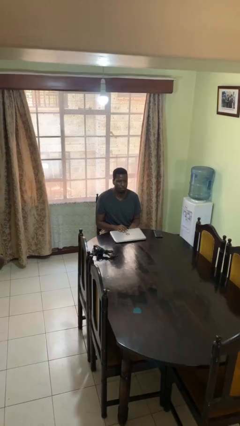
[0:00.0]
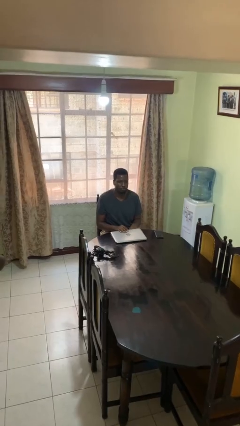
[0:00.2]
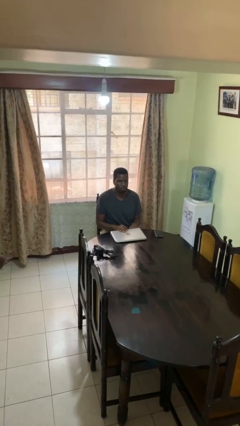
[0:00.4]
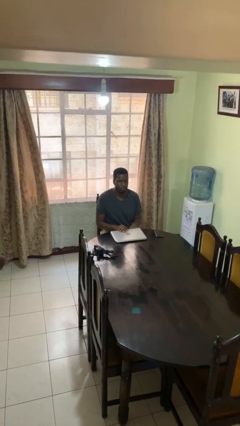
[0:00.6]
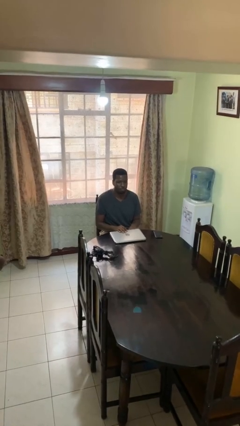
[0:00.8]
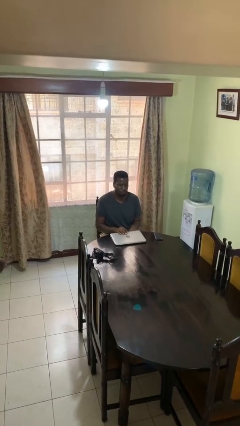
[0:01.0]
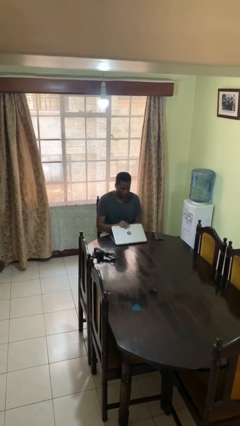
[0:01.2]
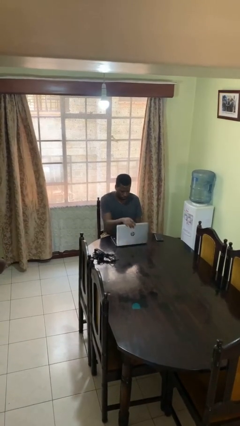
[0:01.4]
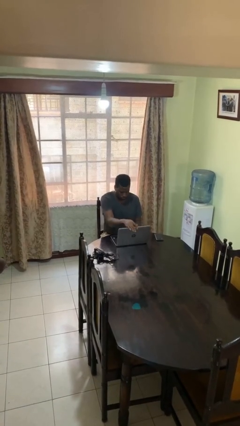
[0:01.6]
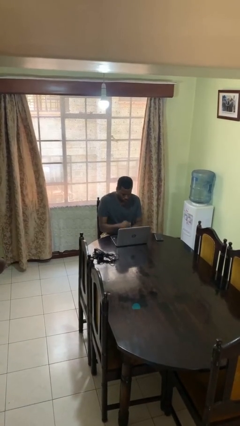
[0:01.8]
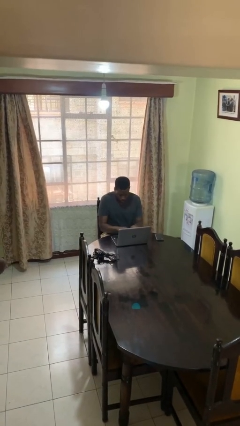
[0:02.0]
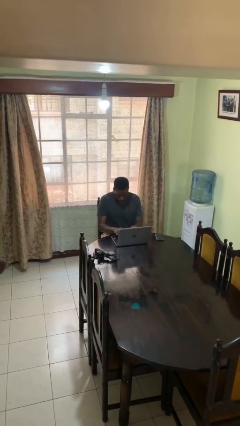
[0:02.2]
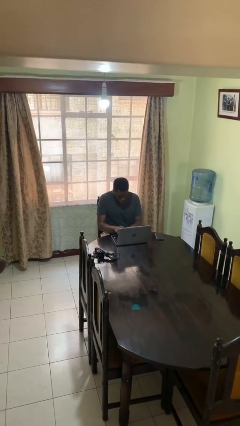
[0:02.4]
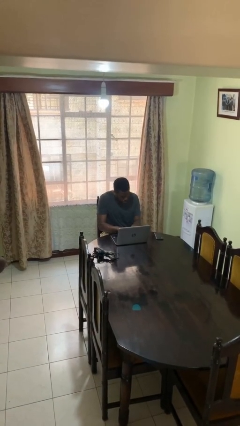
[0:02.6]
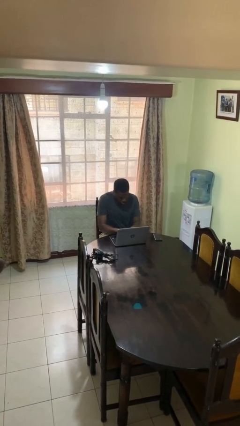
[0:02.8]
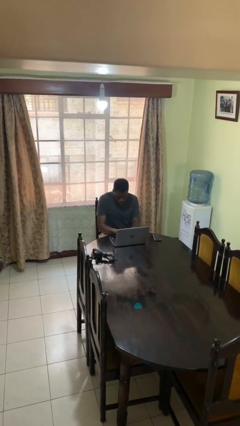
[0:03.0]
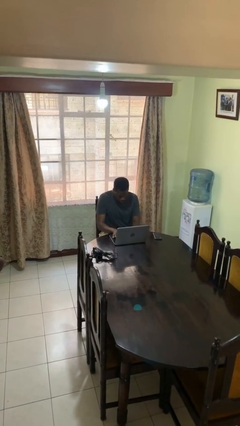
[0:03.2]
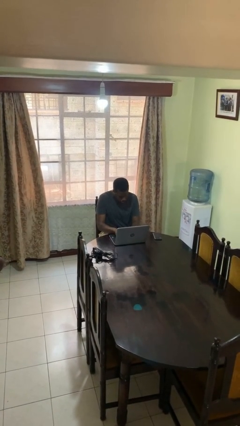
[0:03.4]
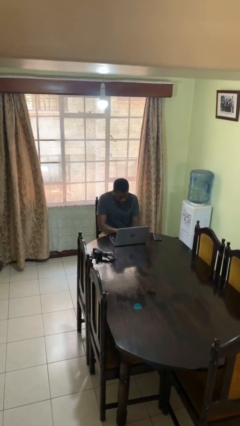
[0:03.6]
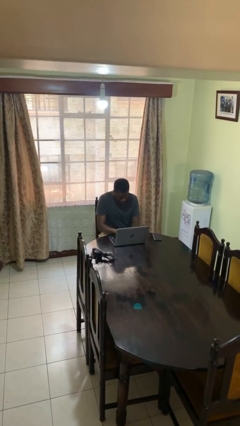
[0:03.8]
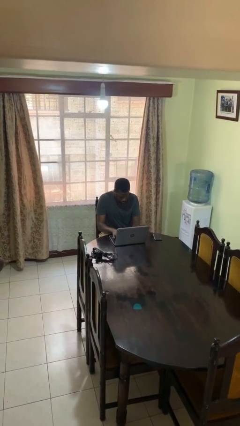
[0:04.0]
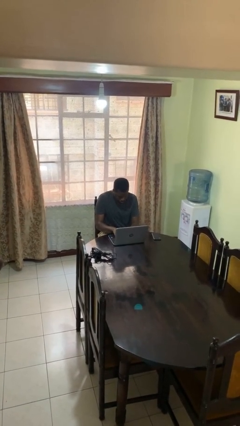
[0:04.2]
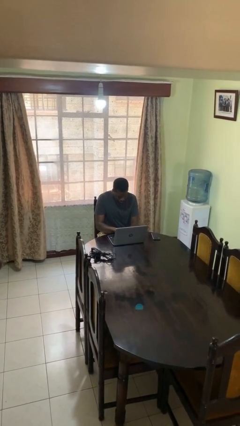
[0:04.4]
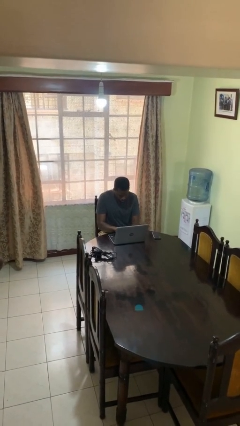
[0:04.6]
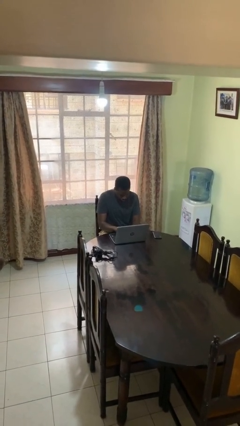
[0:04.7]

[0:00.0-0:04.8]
person interacts with laptop

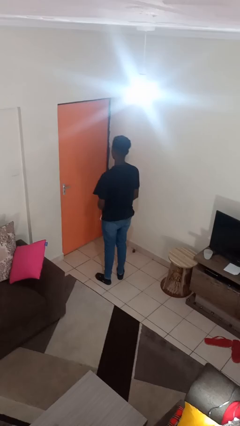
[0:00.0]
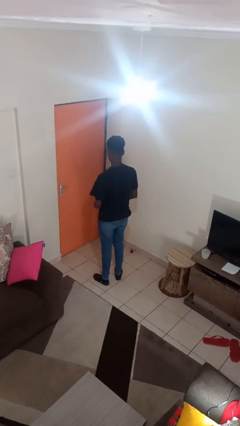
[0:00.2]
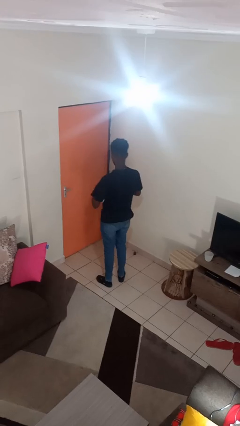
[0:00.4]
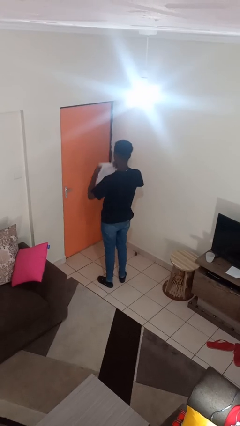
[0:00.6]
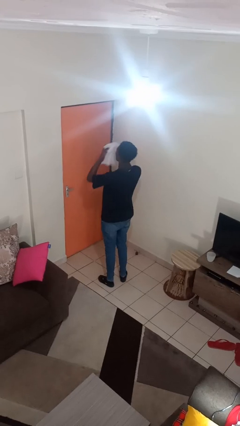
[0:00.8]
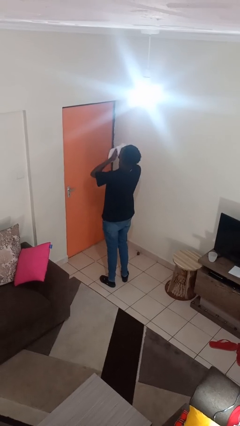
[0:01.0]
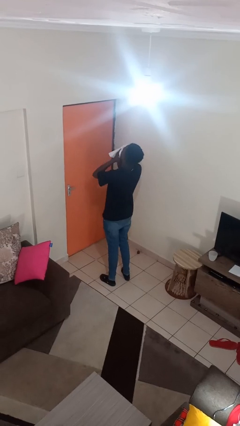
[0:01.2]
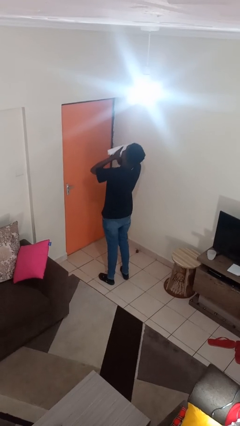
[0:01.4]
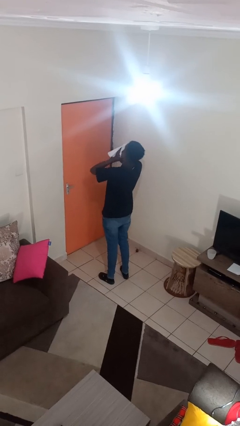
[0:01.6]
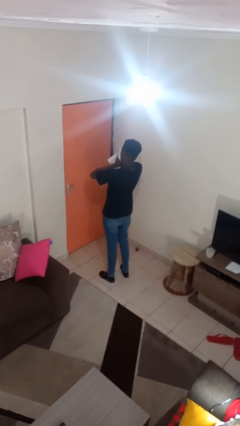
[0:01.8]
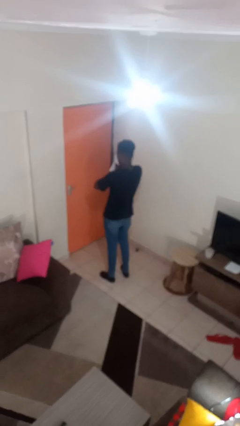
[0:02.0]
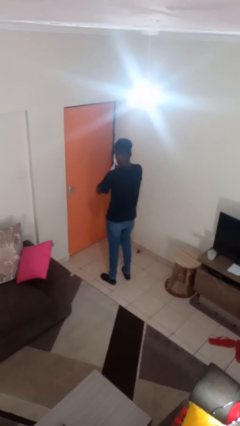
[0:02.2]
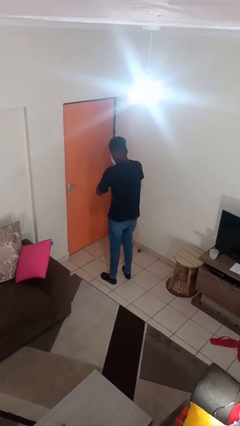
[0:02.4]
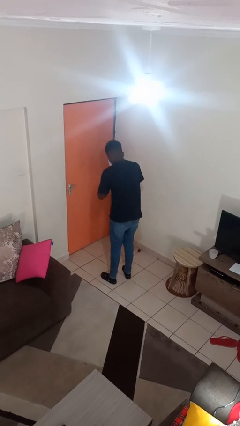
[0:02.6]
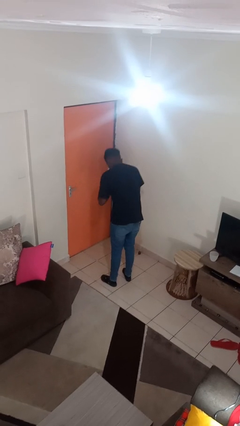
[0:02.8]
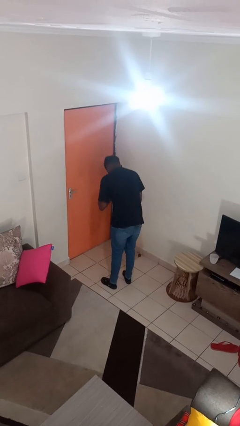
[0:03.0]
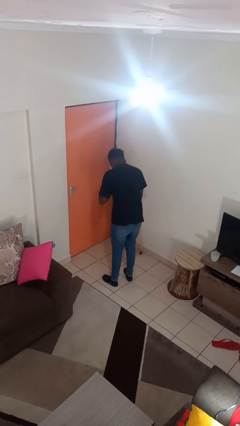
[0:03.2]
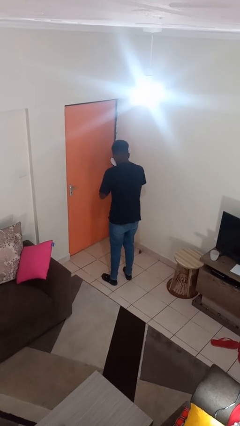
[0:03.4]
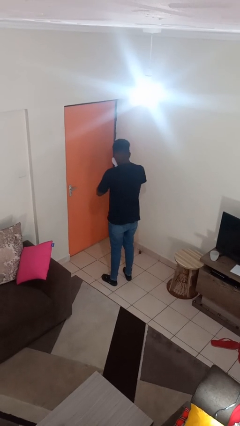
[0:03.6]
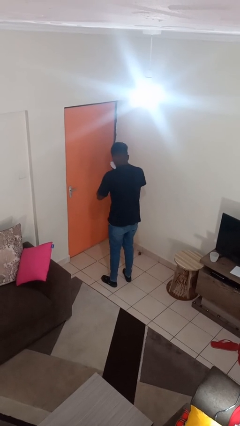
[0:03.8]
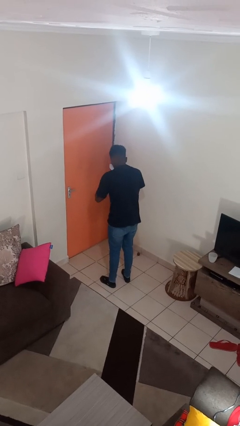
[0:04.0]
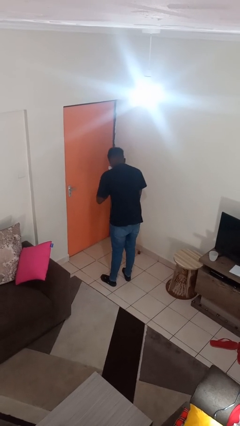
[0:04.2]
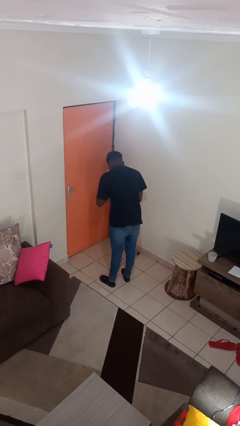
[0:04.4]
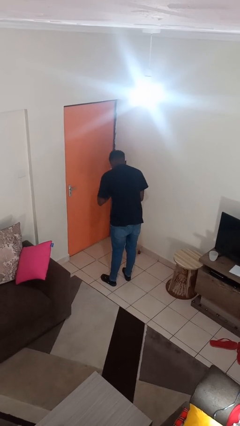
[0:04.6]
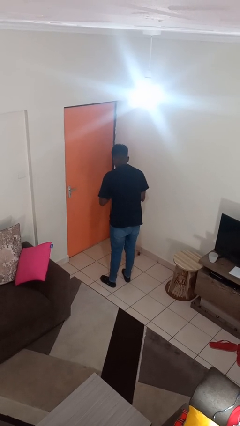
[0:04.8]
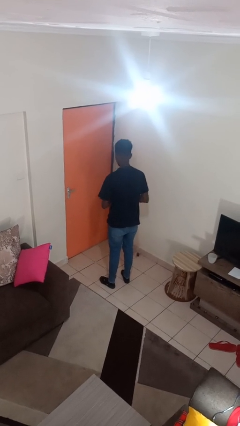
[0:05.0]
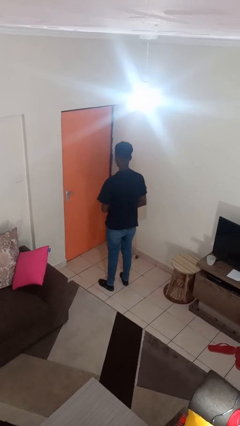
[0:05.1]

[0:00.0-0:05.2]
person blows nose

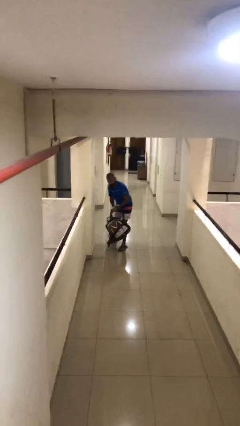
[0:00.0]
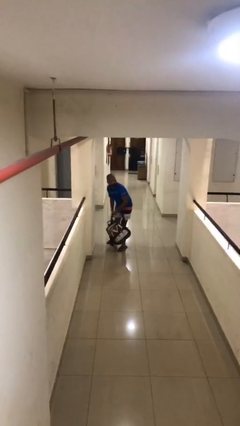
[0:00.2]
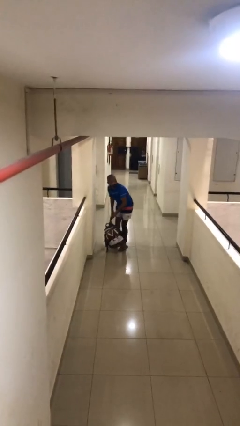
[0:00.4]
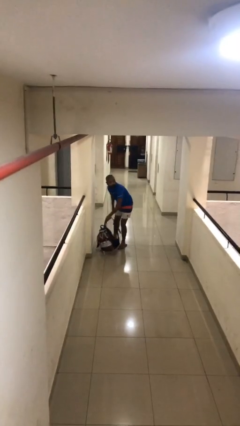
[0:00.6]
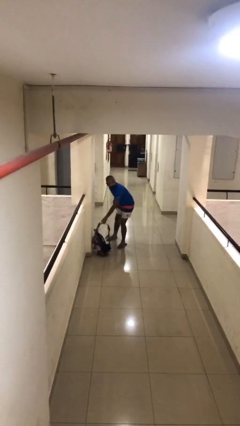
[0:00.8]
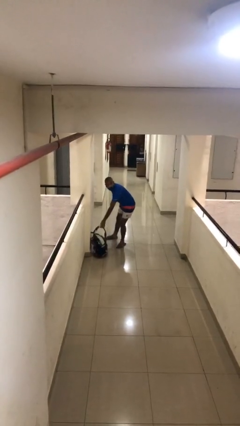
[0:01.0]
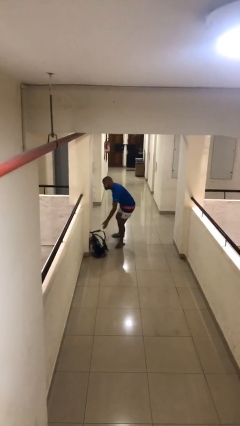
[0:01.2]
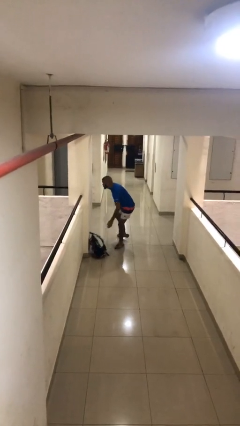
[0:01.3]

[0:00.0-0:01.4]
person puts down object on floor

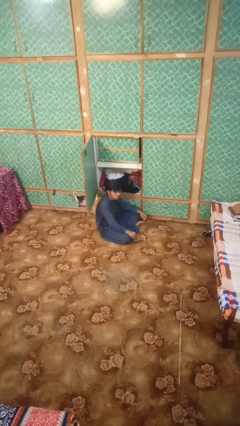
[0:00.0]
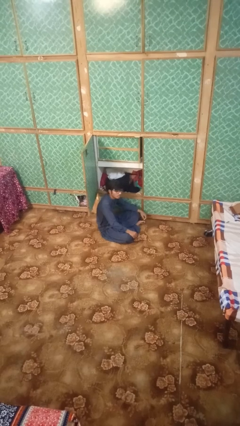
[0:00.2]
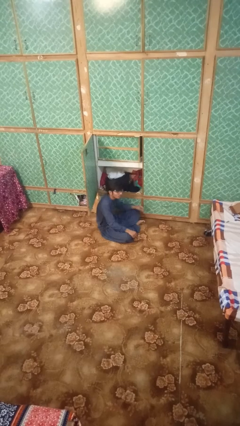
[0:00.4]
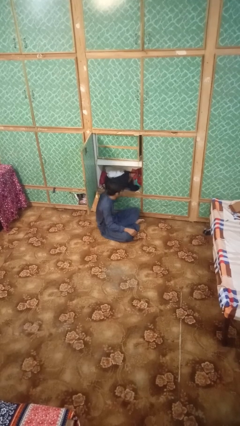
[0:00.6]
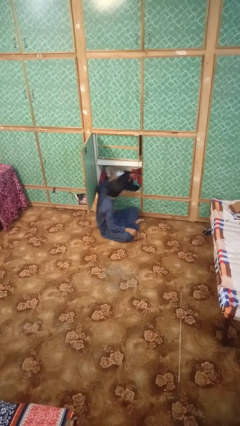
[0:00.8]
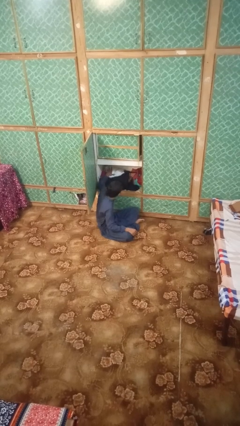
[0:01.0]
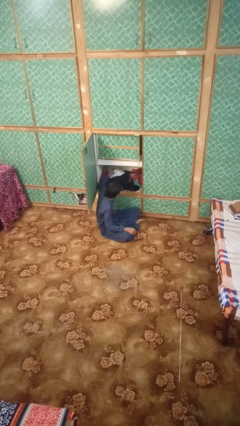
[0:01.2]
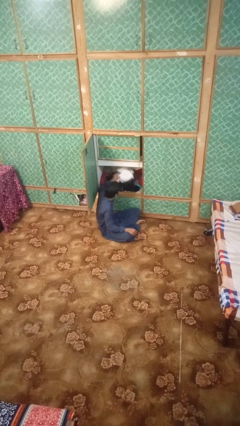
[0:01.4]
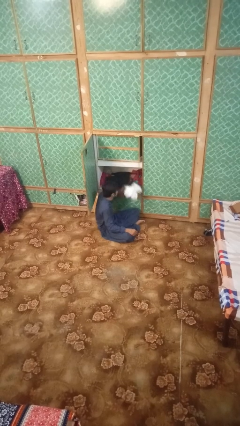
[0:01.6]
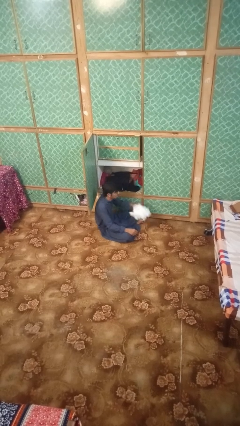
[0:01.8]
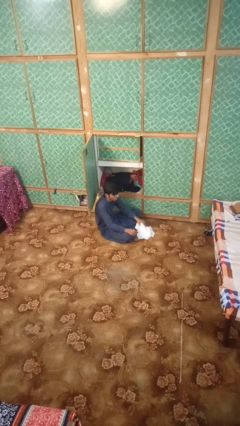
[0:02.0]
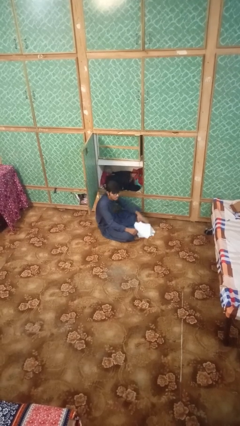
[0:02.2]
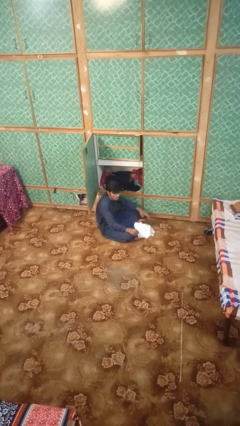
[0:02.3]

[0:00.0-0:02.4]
person takes clothes from dresser

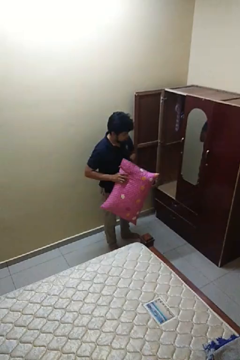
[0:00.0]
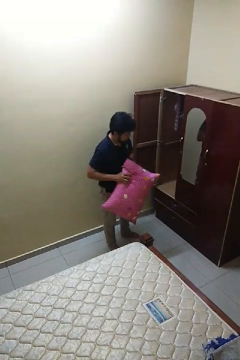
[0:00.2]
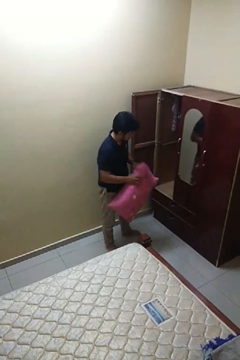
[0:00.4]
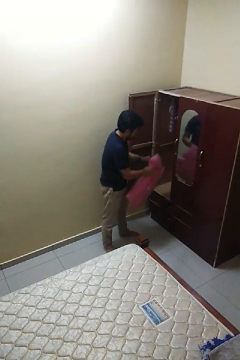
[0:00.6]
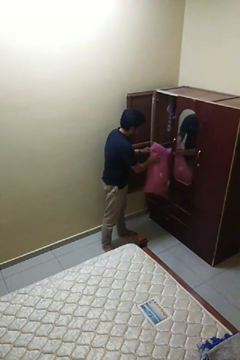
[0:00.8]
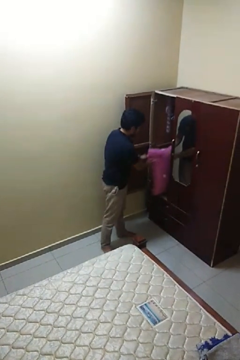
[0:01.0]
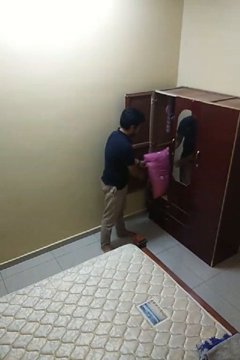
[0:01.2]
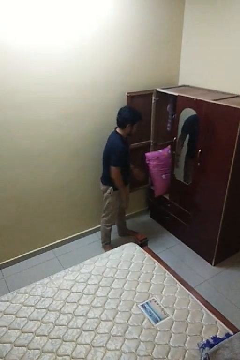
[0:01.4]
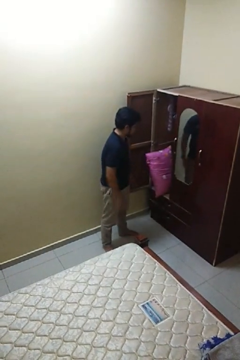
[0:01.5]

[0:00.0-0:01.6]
person puts down object into cabinet

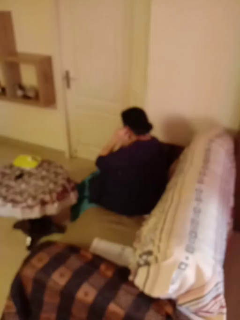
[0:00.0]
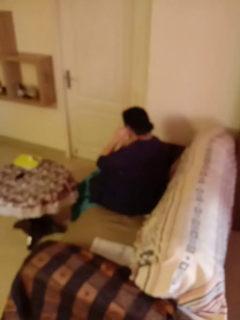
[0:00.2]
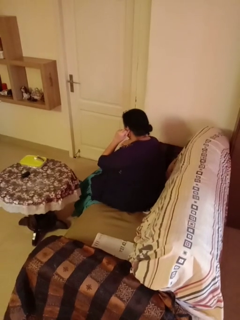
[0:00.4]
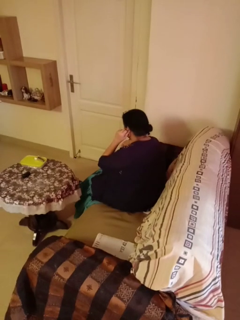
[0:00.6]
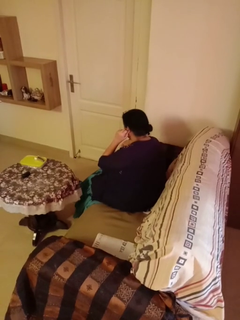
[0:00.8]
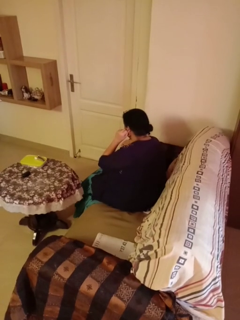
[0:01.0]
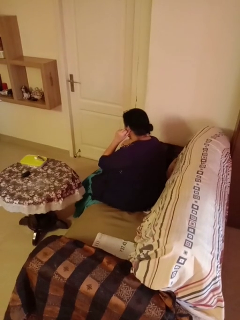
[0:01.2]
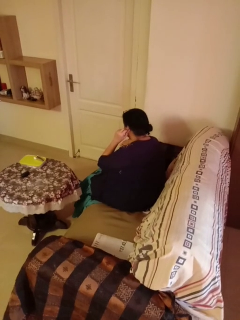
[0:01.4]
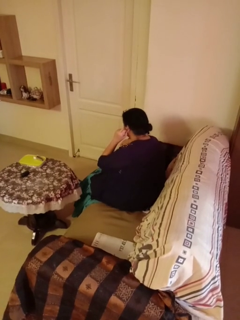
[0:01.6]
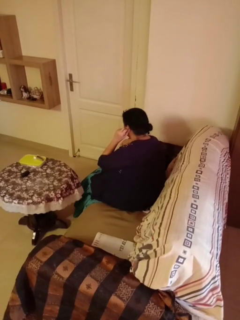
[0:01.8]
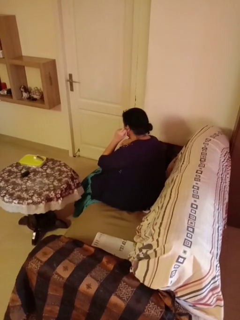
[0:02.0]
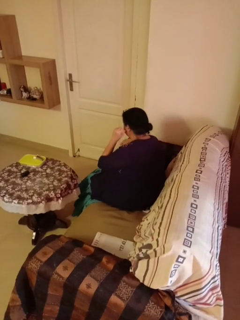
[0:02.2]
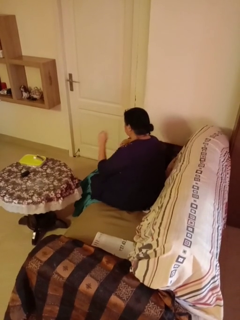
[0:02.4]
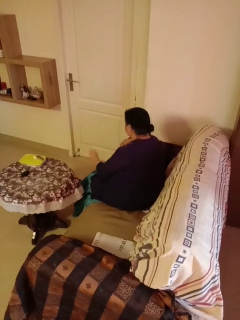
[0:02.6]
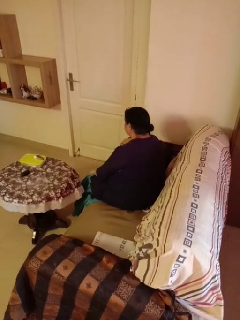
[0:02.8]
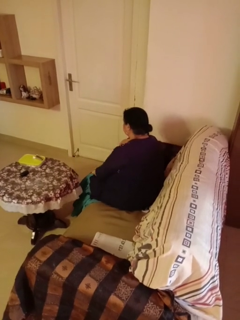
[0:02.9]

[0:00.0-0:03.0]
person touches earlobe
